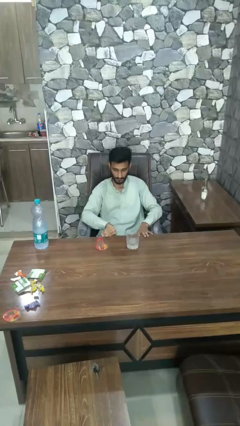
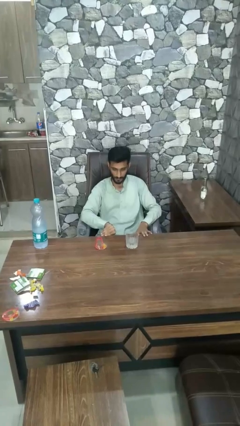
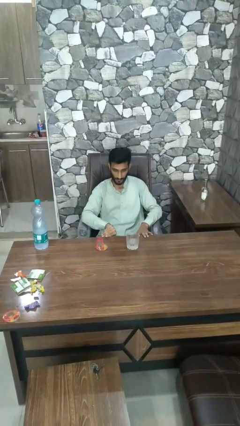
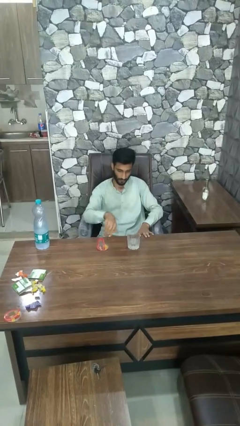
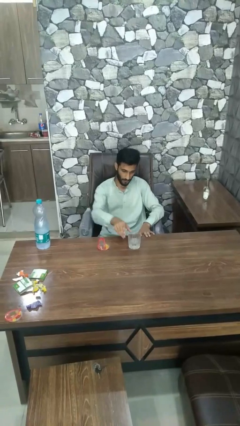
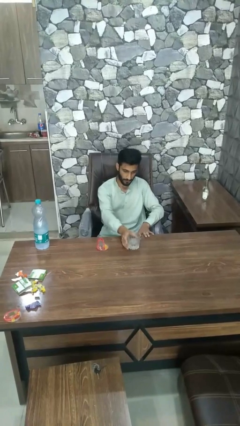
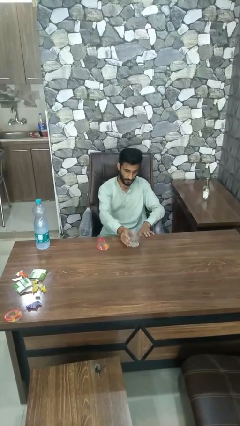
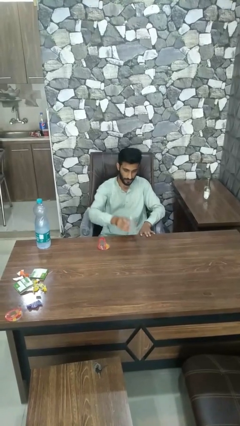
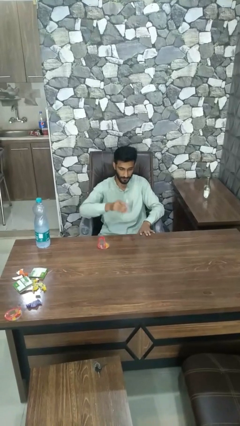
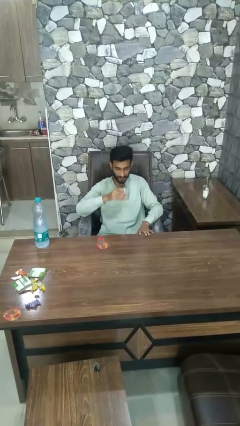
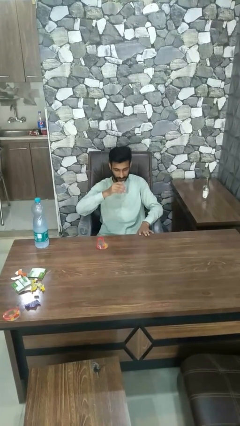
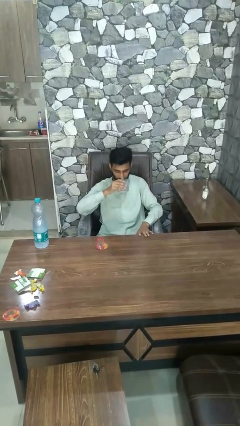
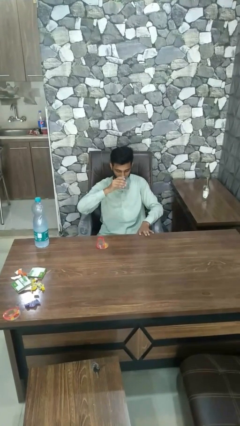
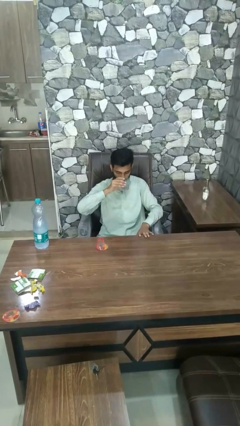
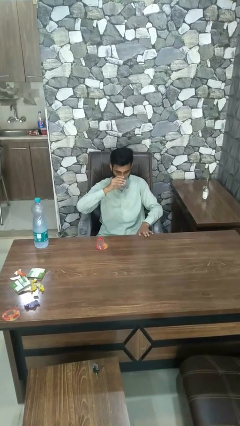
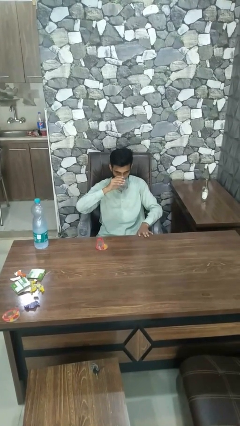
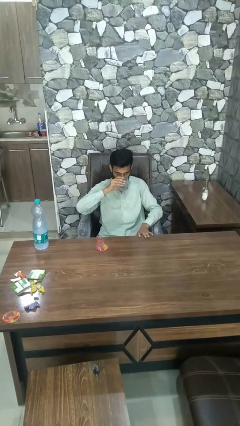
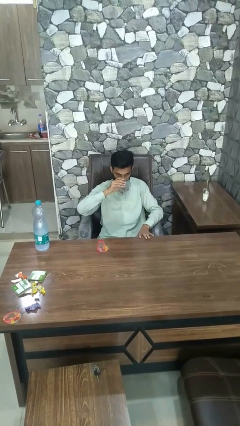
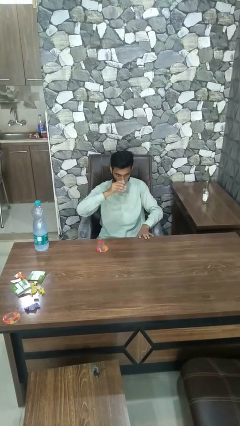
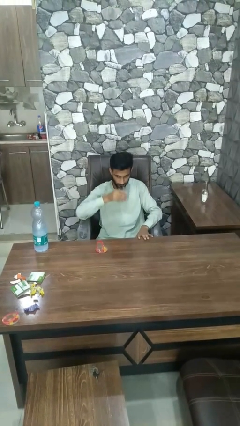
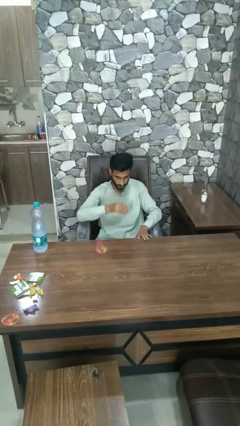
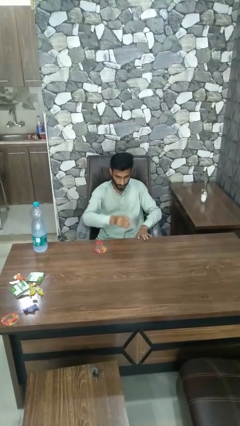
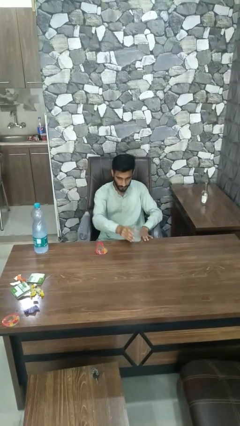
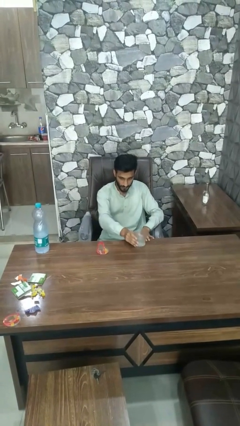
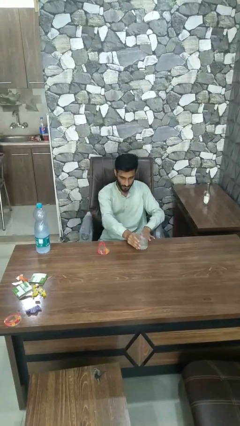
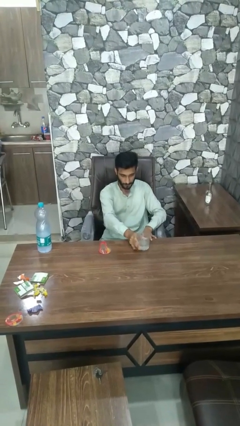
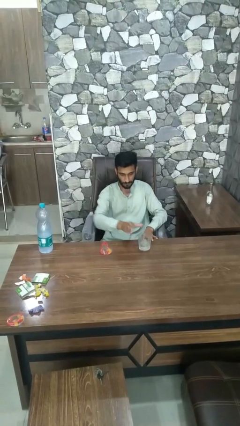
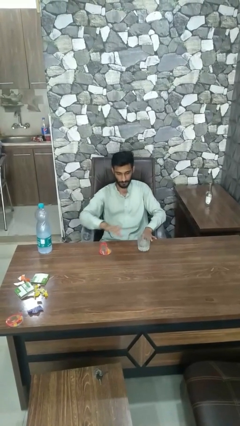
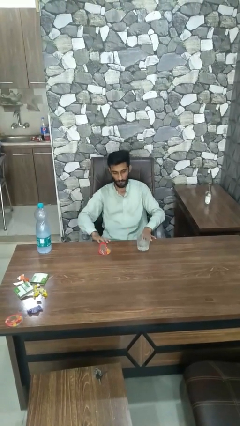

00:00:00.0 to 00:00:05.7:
person drinks from cup

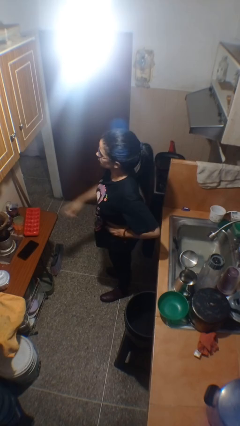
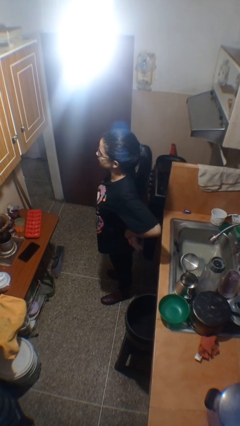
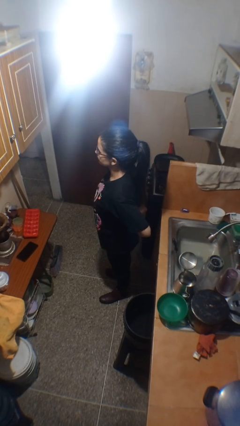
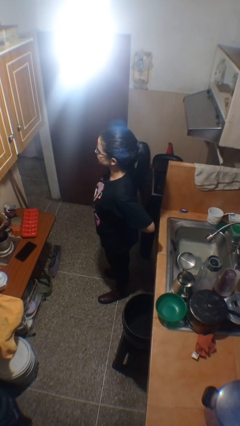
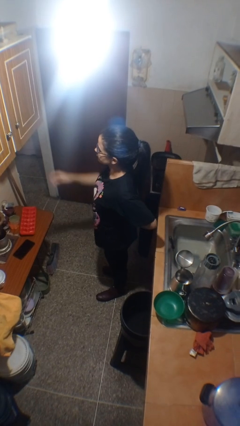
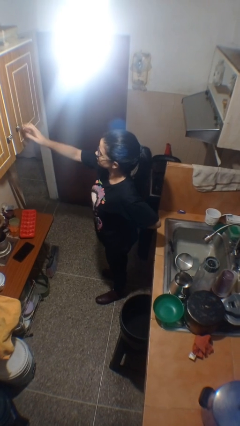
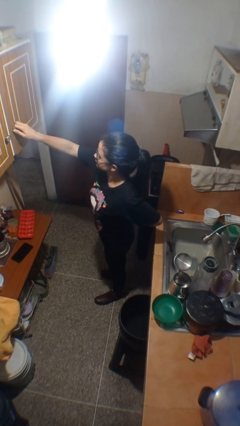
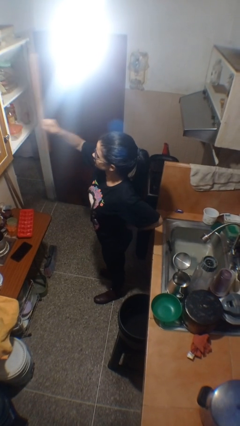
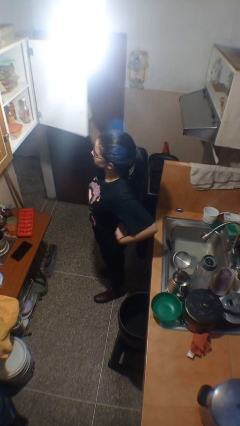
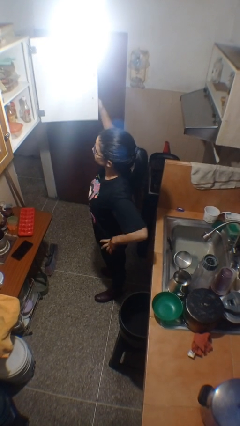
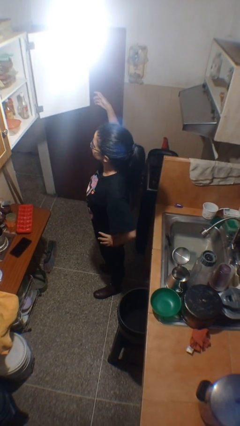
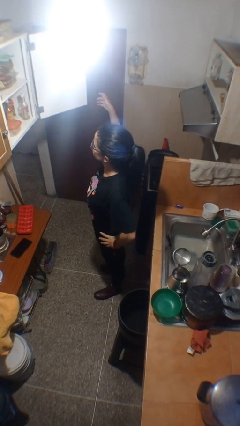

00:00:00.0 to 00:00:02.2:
person opens cabinet

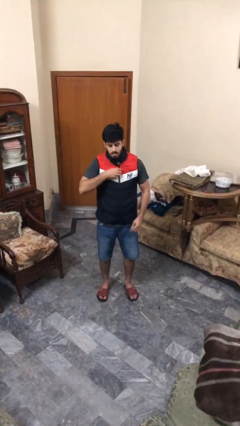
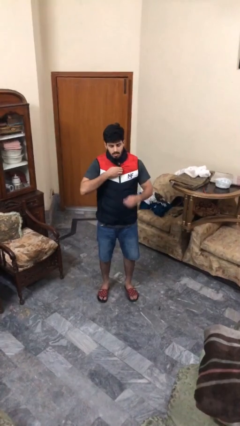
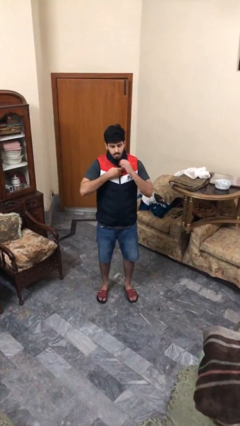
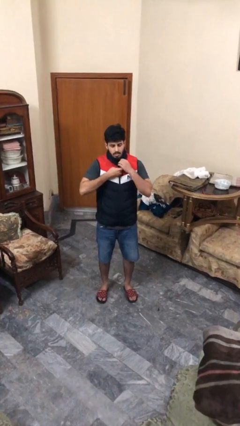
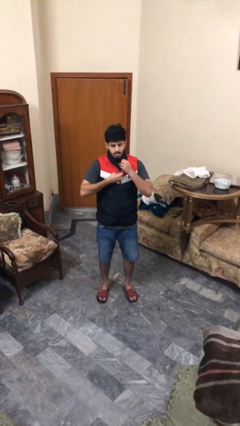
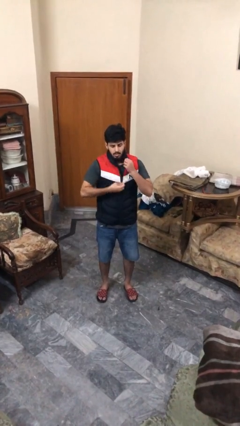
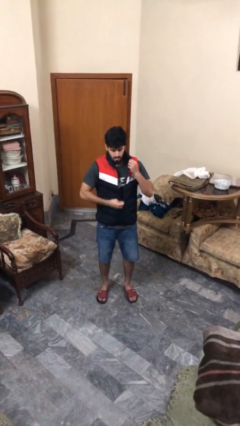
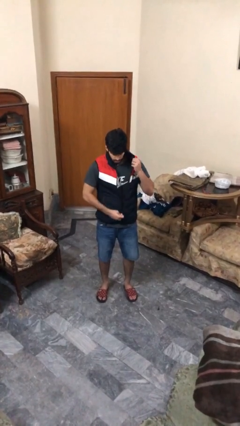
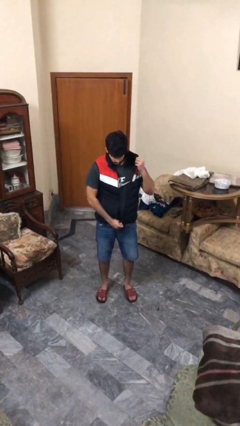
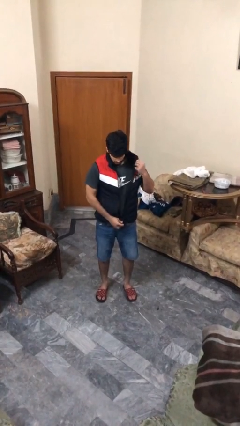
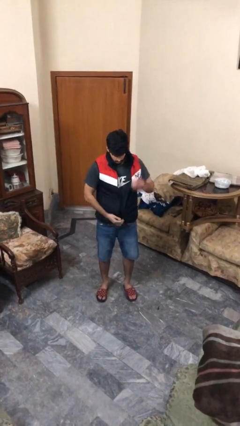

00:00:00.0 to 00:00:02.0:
person unzips jacket

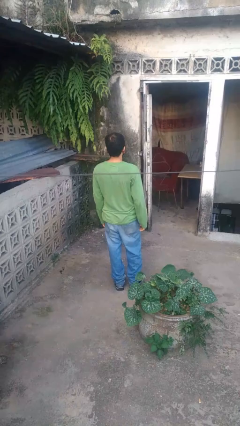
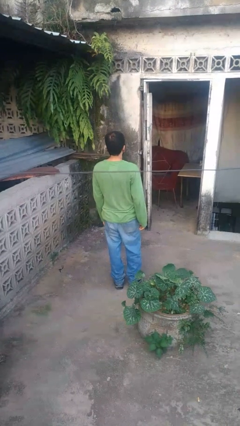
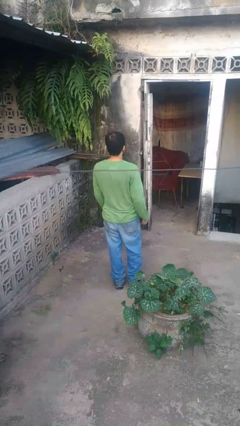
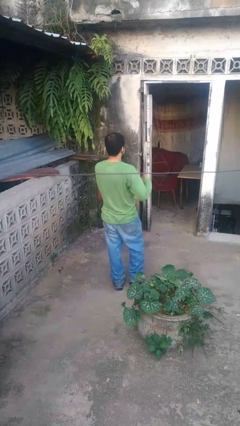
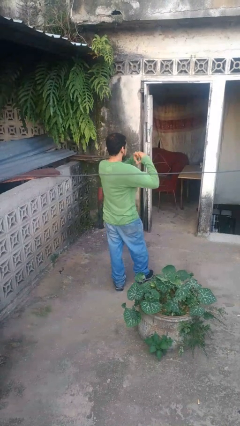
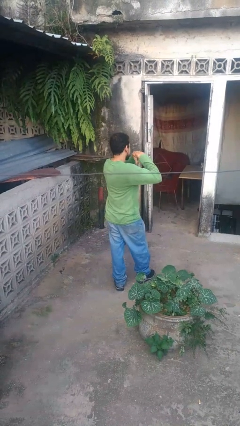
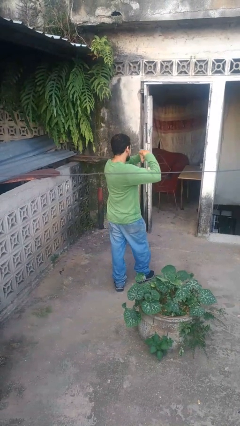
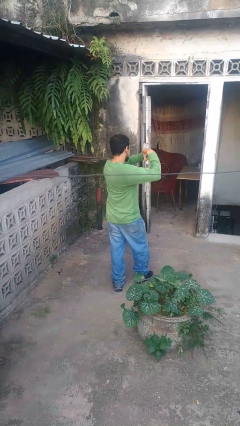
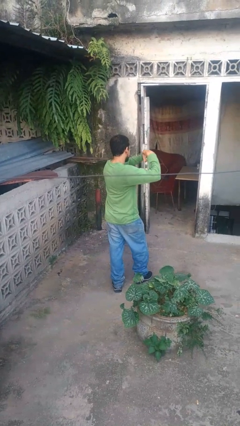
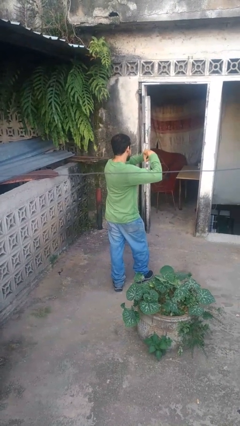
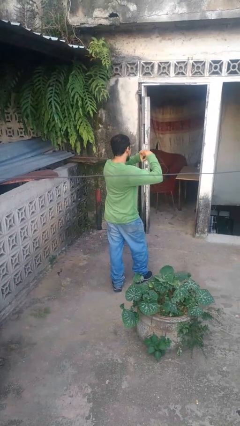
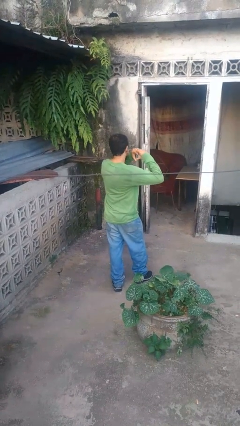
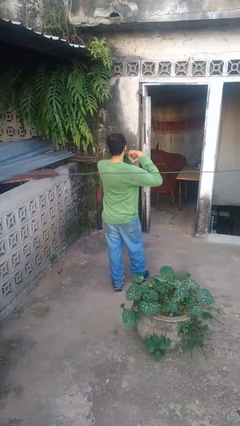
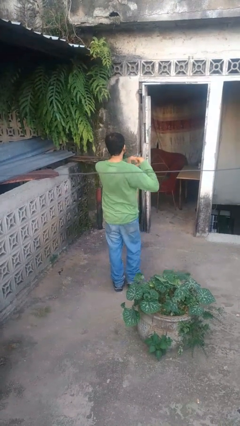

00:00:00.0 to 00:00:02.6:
person gestures heart

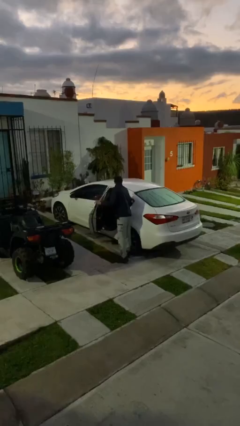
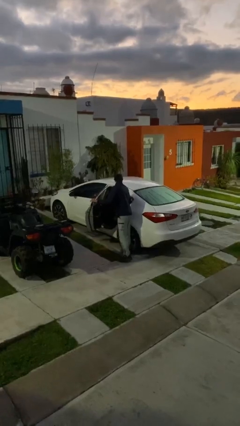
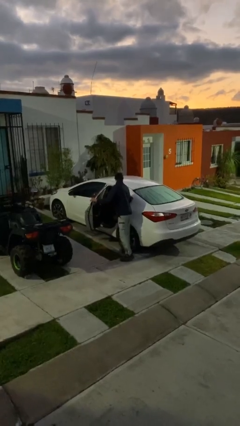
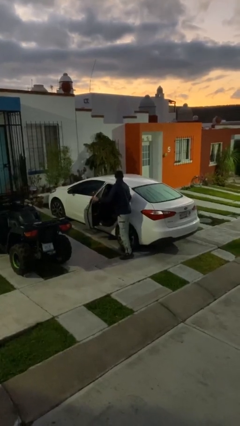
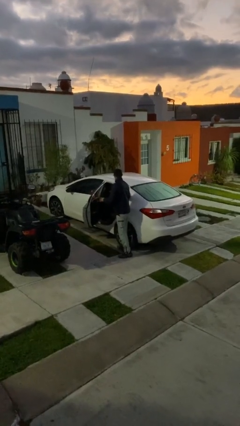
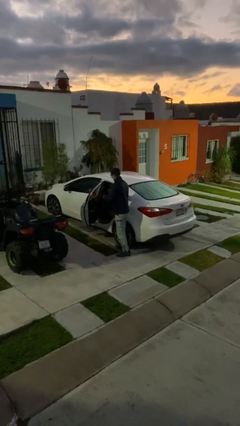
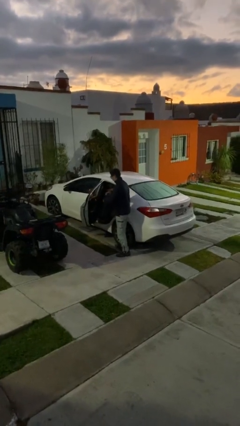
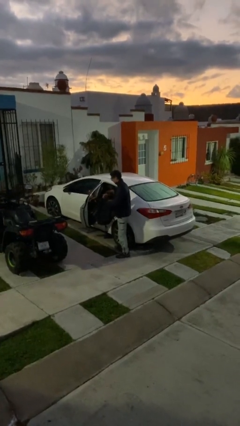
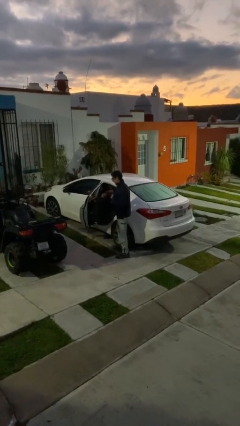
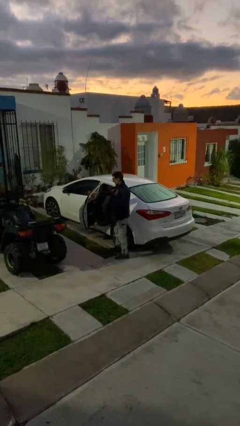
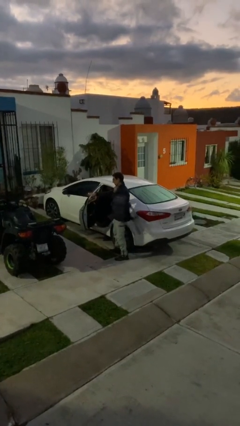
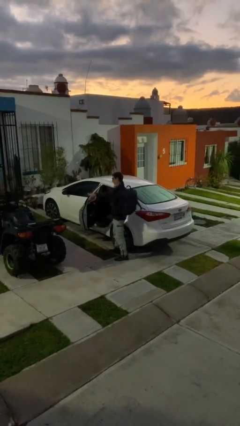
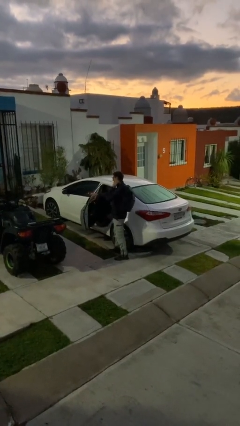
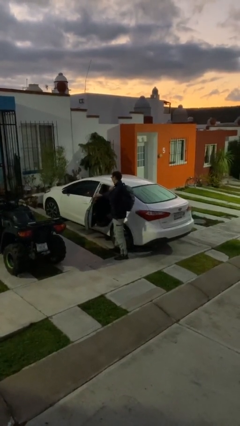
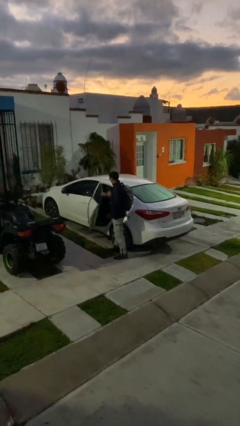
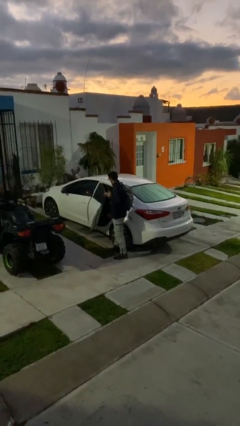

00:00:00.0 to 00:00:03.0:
person unloads car

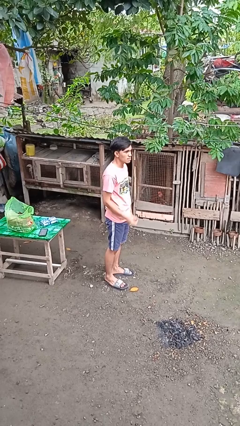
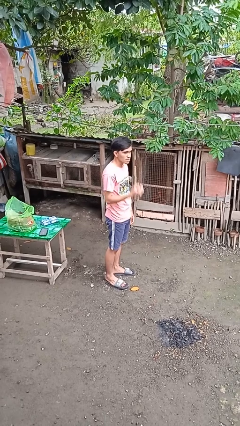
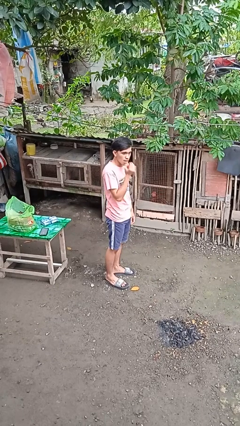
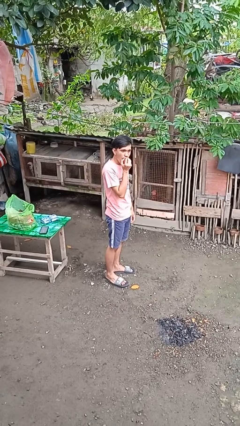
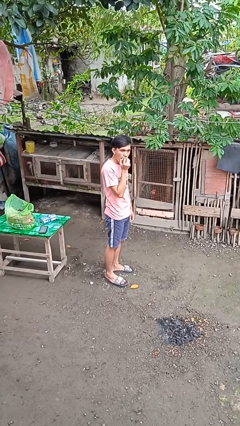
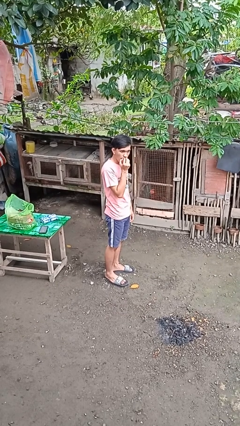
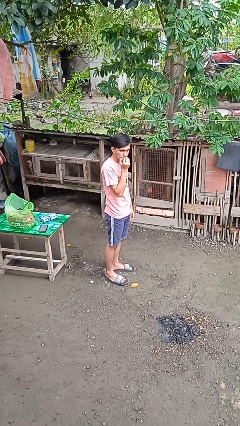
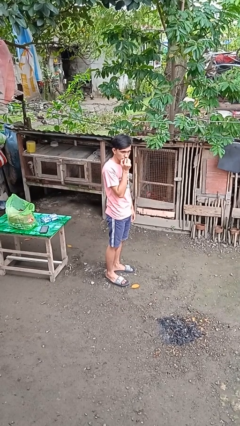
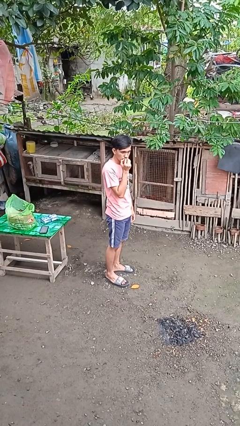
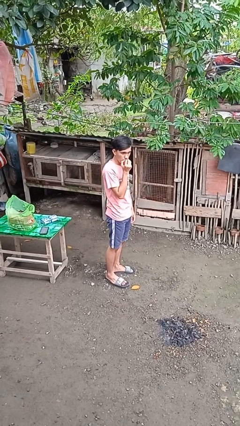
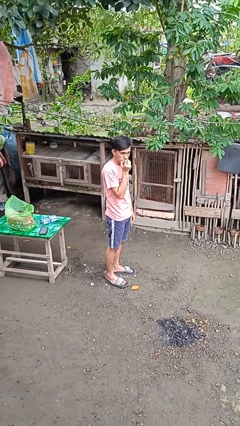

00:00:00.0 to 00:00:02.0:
person eats apple
